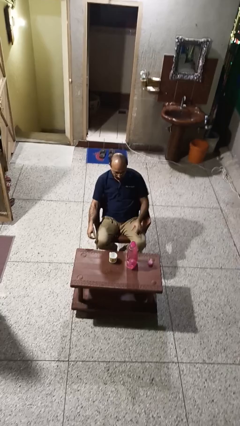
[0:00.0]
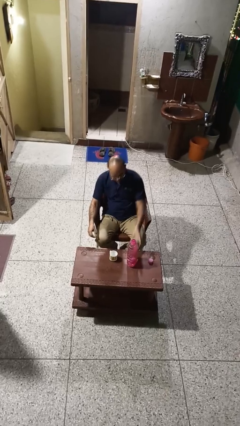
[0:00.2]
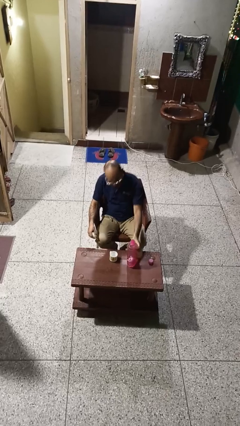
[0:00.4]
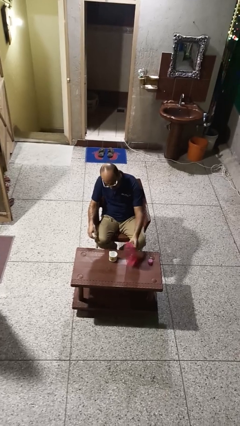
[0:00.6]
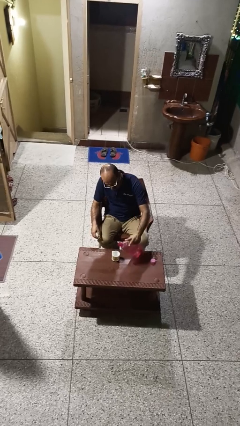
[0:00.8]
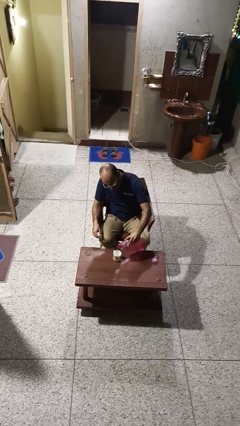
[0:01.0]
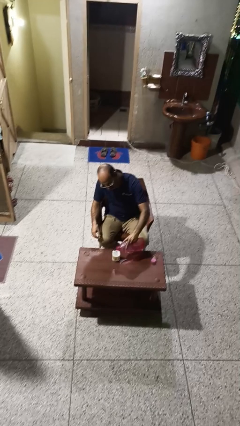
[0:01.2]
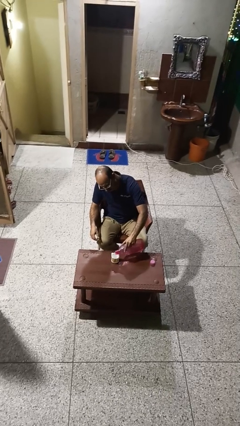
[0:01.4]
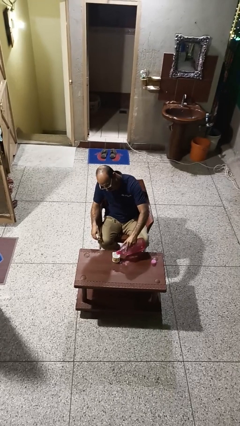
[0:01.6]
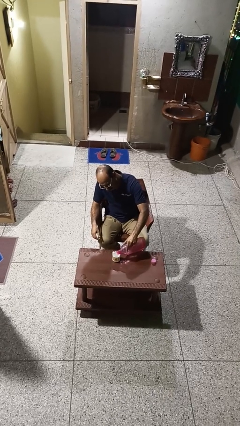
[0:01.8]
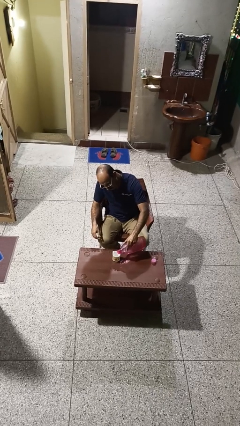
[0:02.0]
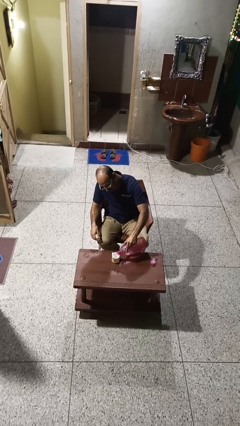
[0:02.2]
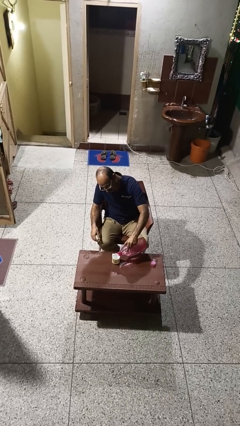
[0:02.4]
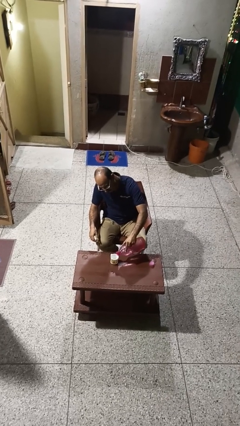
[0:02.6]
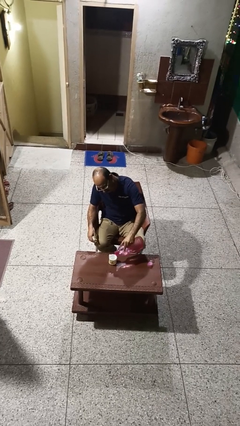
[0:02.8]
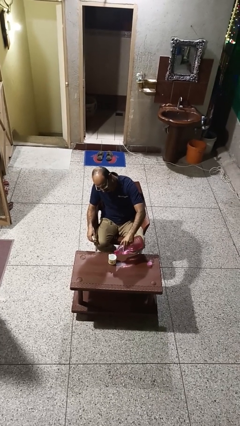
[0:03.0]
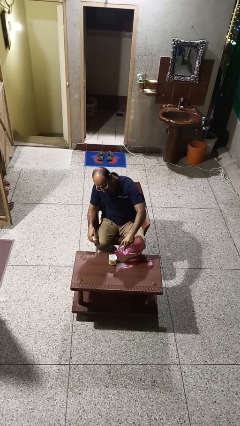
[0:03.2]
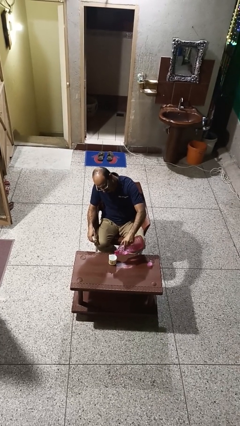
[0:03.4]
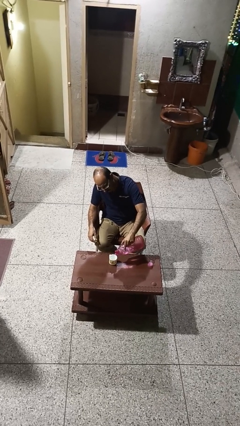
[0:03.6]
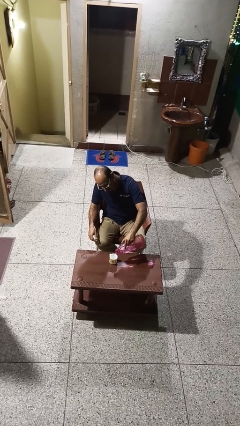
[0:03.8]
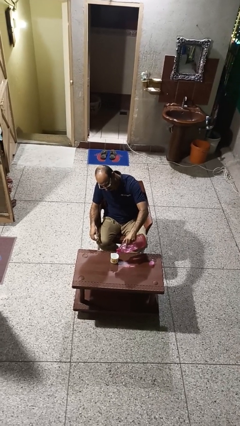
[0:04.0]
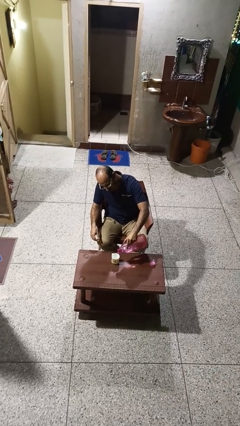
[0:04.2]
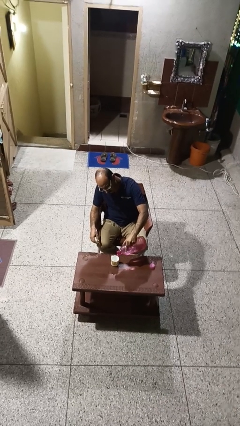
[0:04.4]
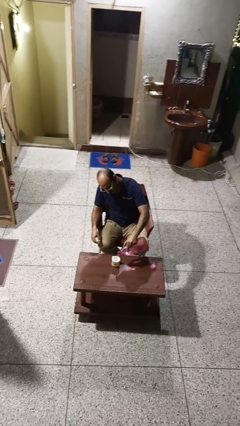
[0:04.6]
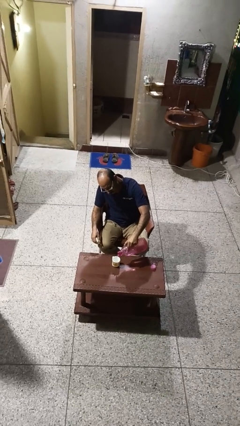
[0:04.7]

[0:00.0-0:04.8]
person pours liquid into cup

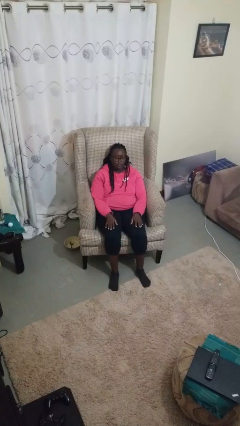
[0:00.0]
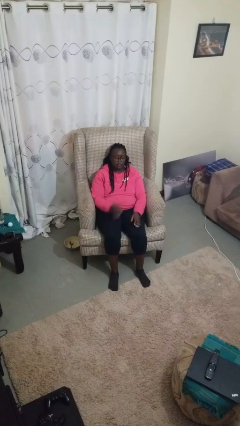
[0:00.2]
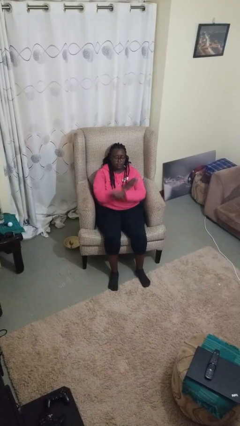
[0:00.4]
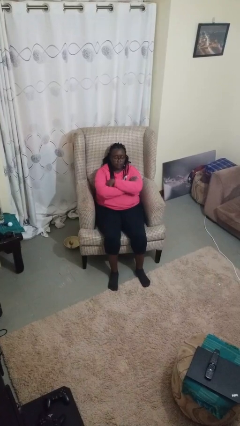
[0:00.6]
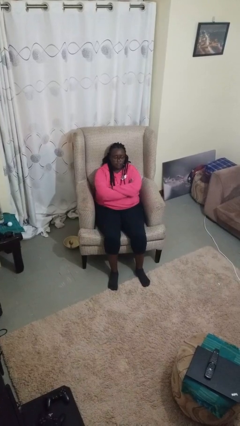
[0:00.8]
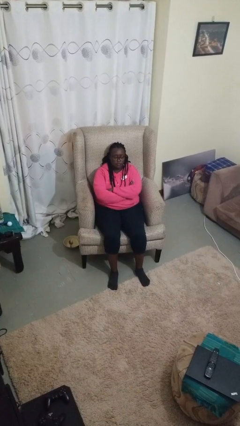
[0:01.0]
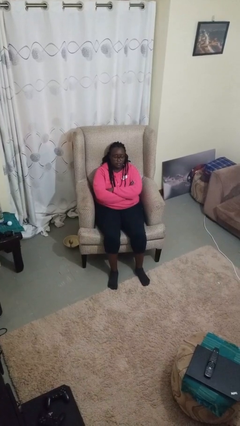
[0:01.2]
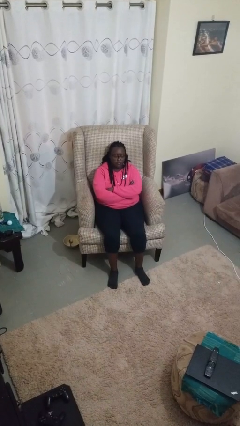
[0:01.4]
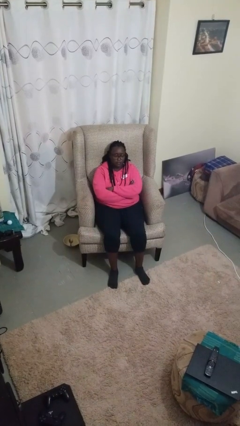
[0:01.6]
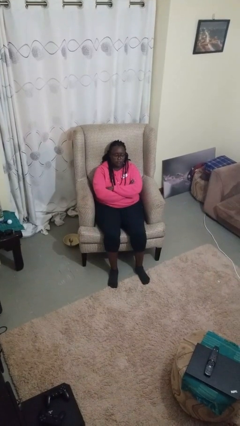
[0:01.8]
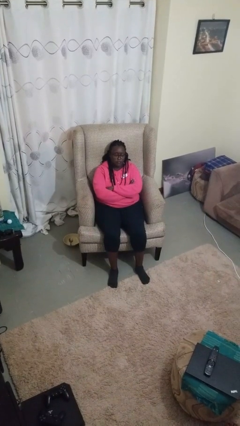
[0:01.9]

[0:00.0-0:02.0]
person crosses arms

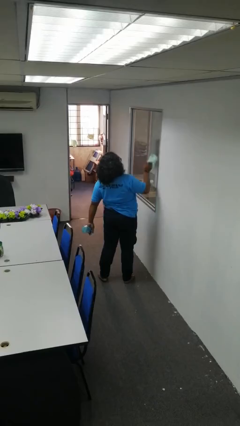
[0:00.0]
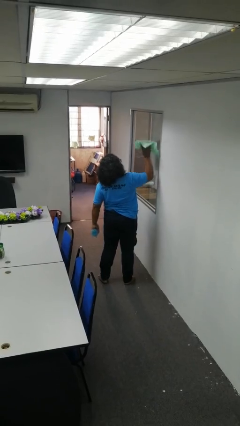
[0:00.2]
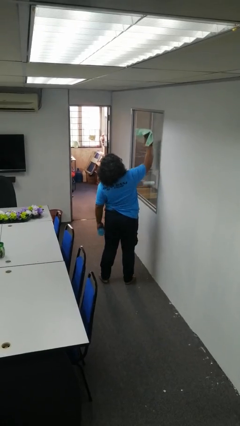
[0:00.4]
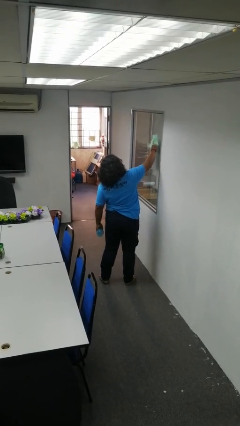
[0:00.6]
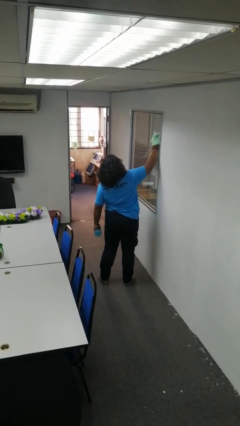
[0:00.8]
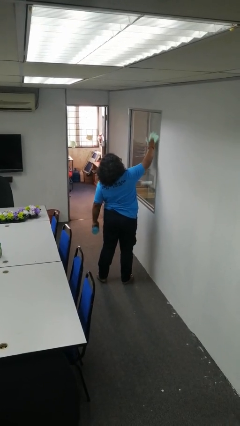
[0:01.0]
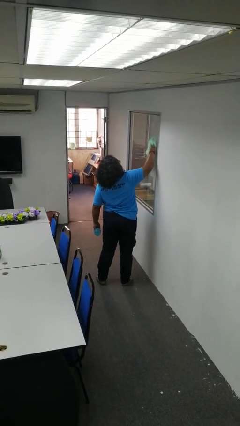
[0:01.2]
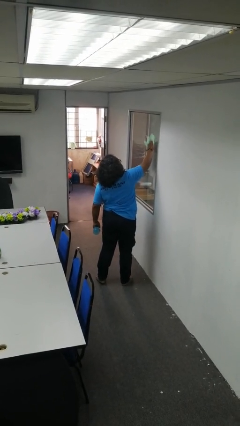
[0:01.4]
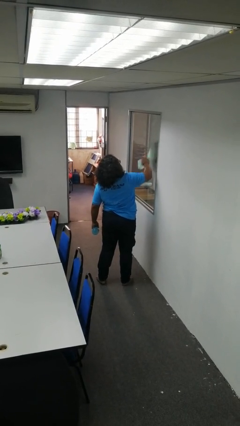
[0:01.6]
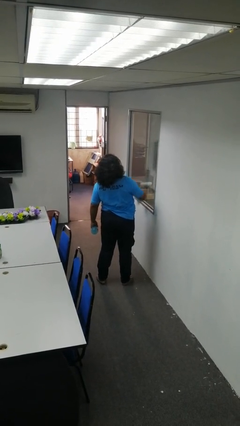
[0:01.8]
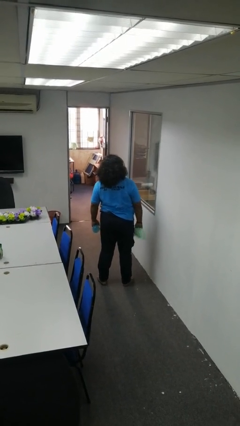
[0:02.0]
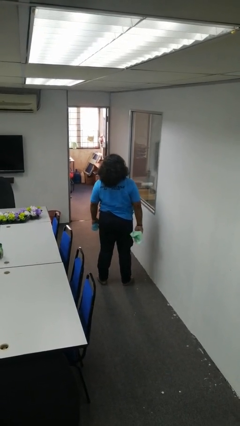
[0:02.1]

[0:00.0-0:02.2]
person washes window

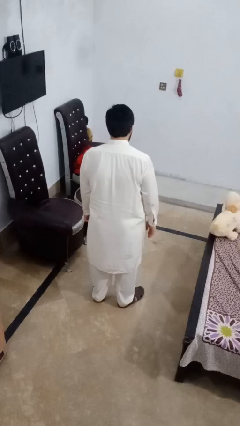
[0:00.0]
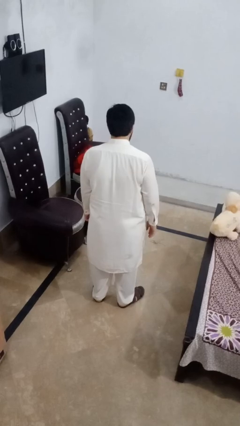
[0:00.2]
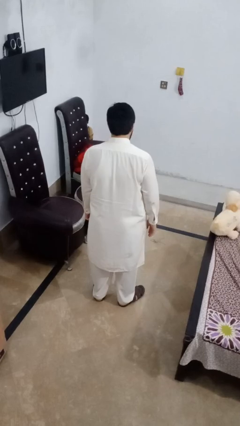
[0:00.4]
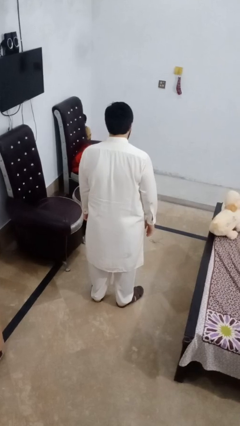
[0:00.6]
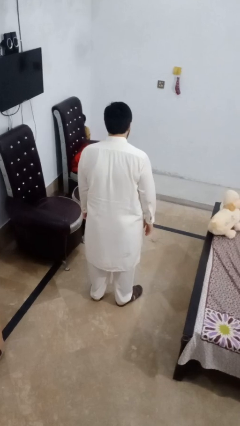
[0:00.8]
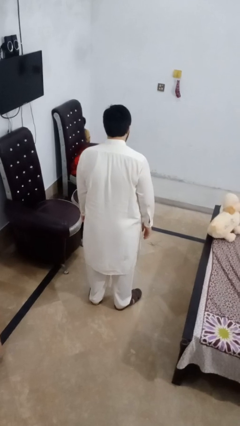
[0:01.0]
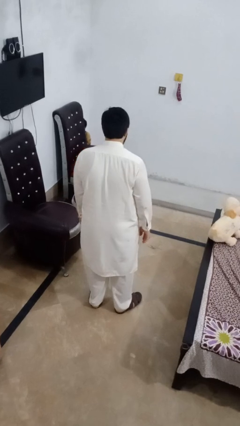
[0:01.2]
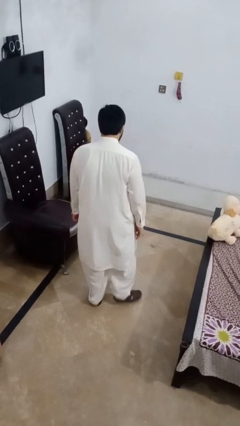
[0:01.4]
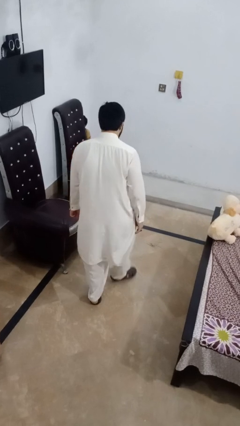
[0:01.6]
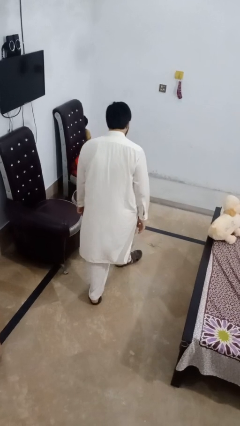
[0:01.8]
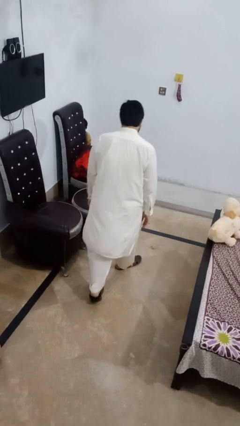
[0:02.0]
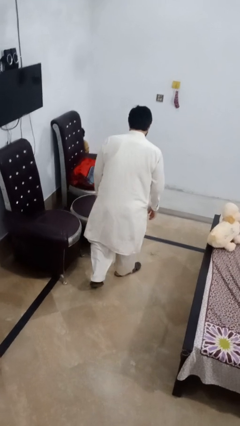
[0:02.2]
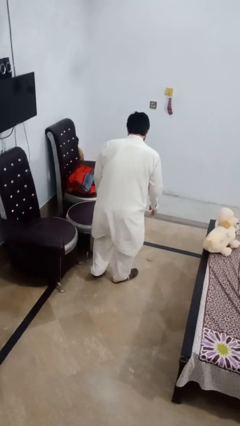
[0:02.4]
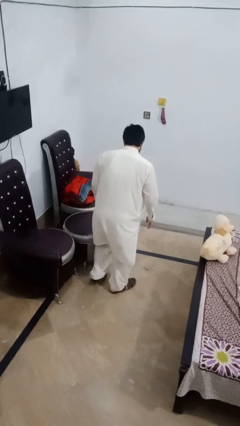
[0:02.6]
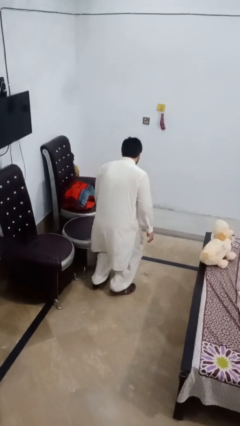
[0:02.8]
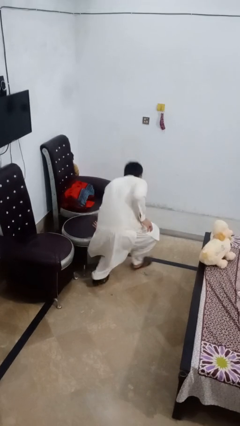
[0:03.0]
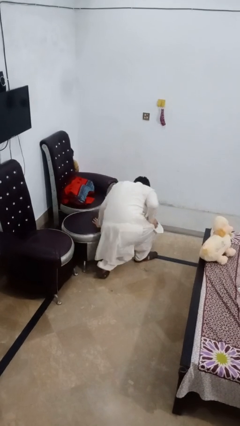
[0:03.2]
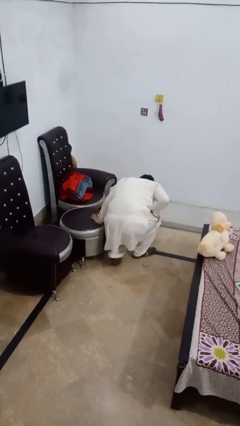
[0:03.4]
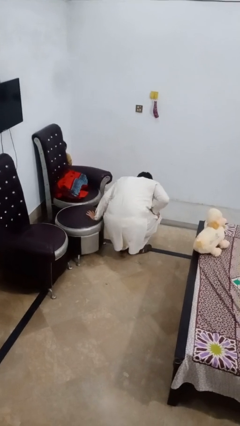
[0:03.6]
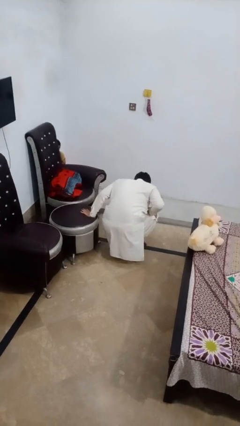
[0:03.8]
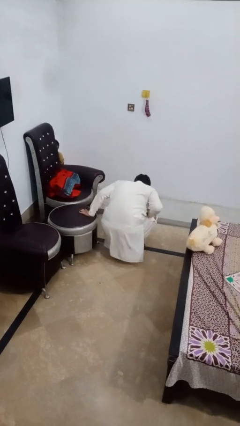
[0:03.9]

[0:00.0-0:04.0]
person trips on object on floor

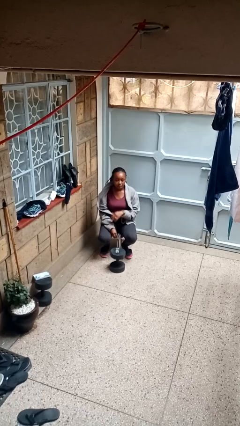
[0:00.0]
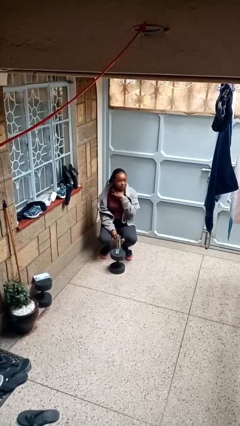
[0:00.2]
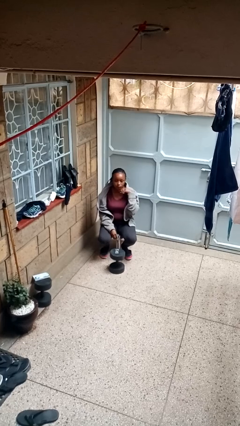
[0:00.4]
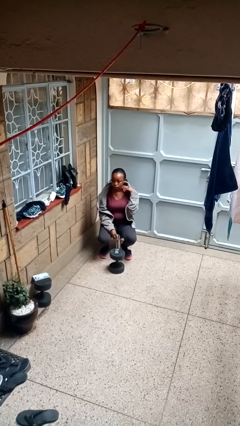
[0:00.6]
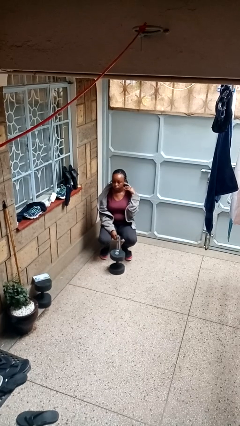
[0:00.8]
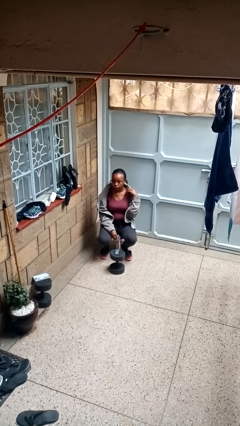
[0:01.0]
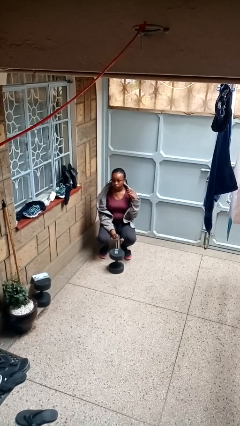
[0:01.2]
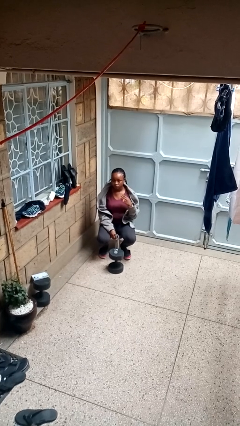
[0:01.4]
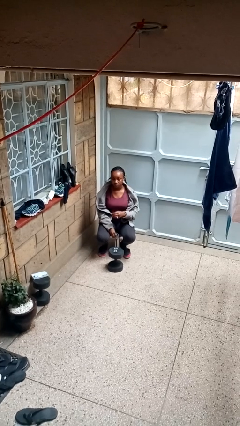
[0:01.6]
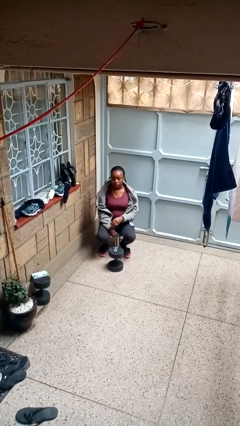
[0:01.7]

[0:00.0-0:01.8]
person gestures cut

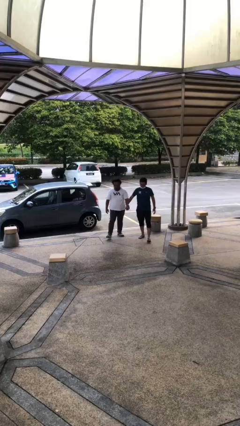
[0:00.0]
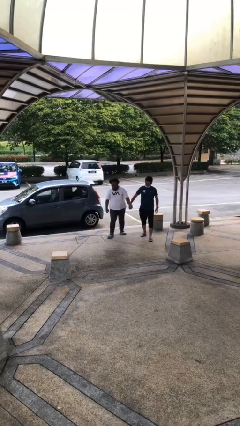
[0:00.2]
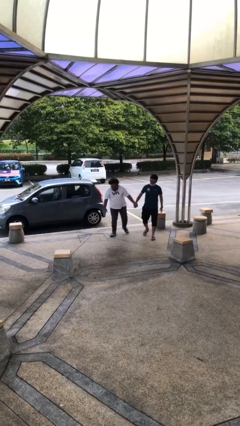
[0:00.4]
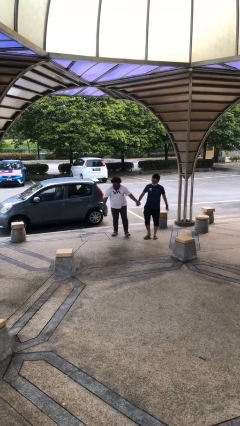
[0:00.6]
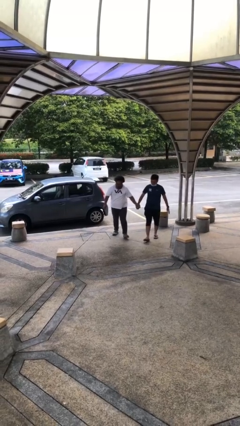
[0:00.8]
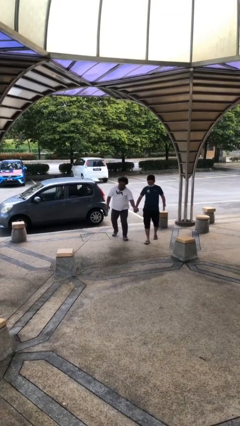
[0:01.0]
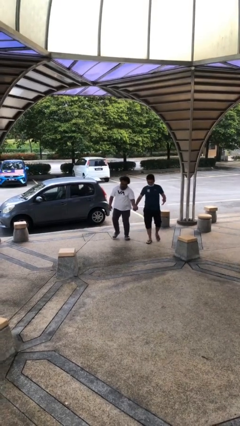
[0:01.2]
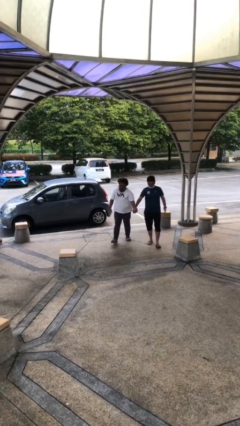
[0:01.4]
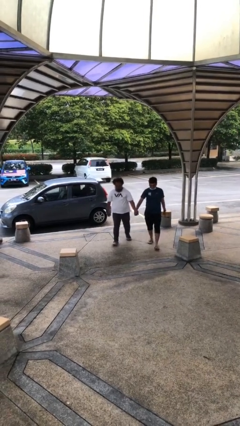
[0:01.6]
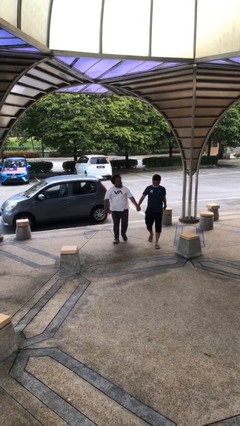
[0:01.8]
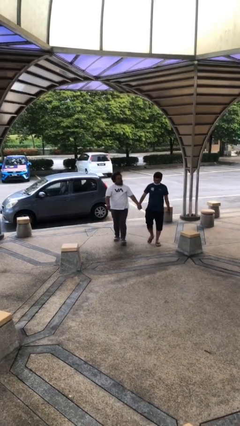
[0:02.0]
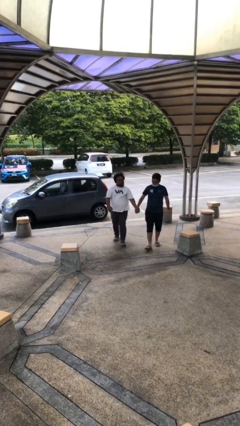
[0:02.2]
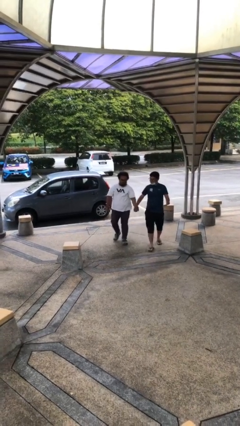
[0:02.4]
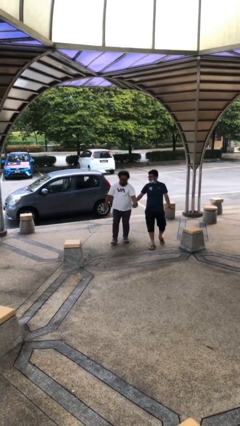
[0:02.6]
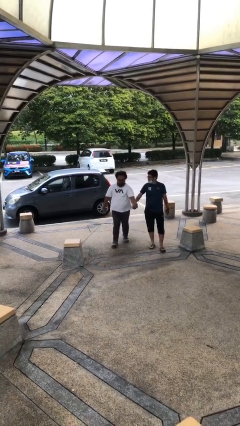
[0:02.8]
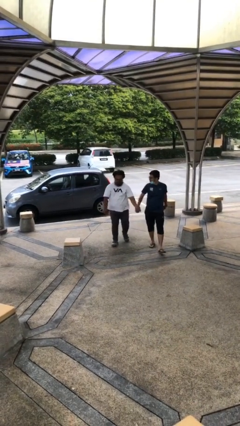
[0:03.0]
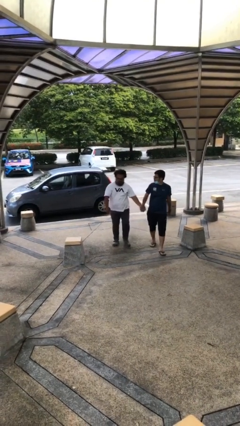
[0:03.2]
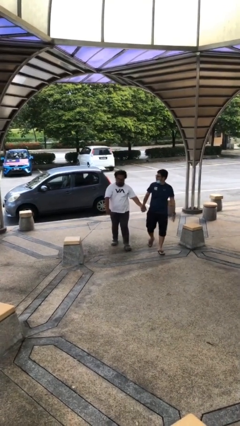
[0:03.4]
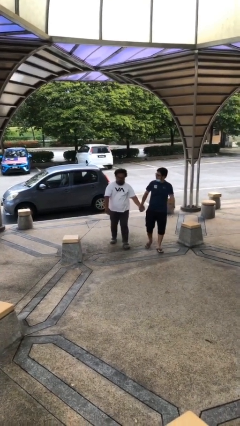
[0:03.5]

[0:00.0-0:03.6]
person holds hand
